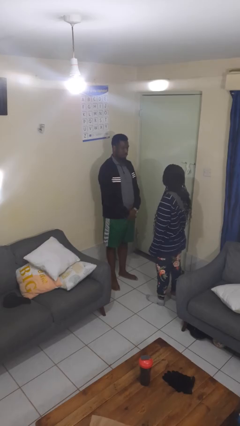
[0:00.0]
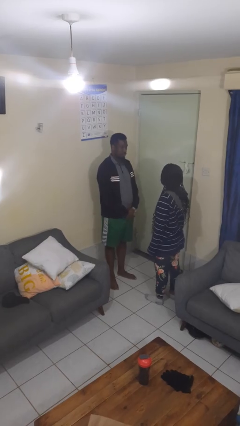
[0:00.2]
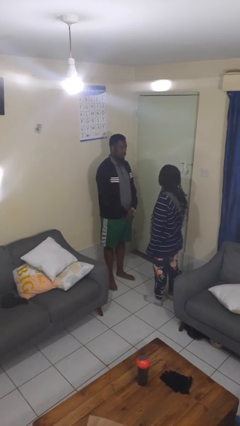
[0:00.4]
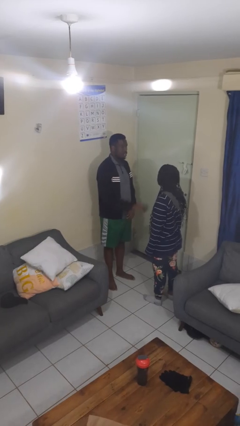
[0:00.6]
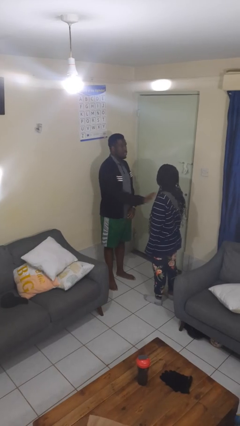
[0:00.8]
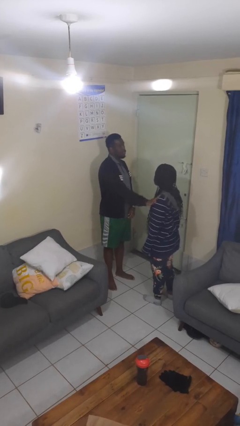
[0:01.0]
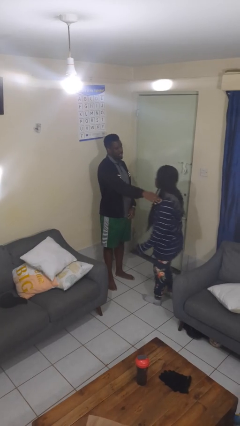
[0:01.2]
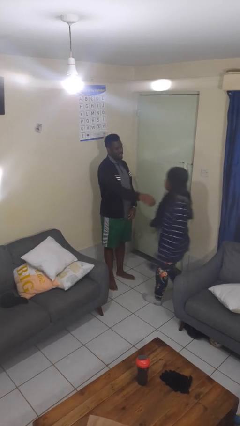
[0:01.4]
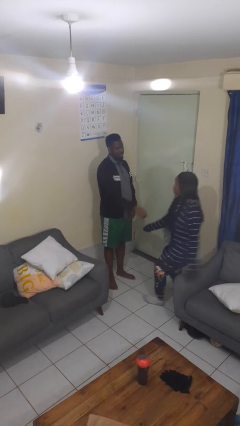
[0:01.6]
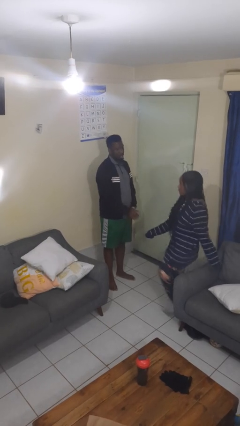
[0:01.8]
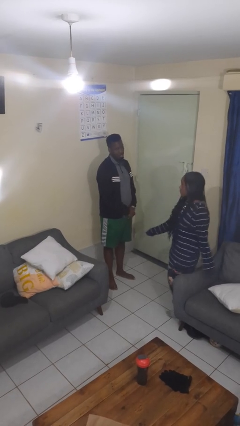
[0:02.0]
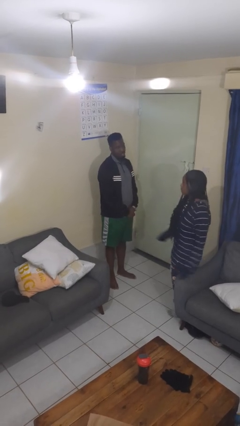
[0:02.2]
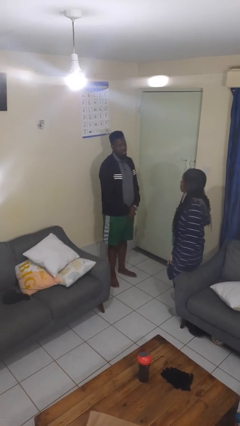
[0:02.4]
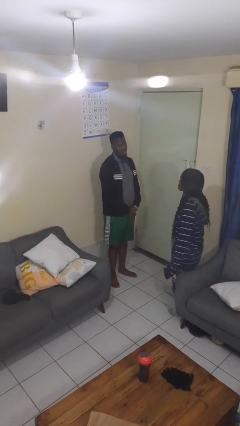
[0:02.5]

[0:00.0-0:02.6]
person shoves person

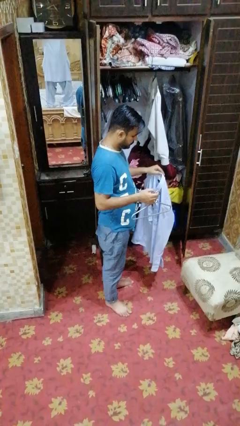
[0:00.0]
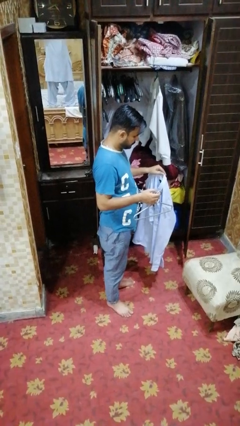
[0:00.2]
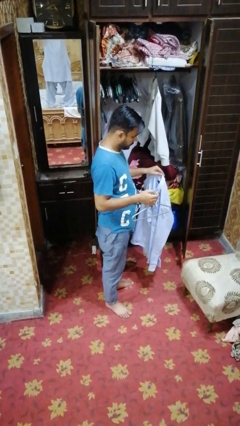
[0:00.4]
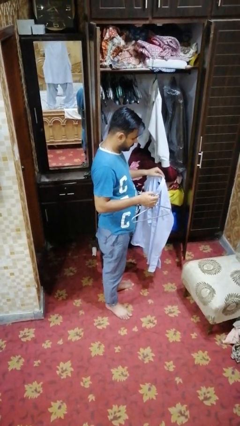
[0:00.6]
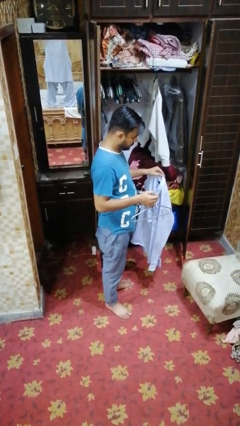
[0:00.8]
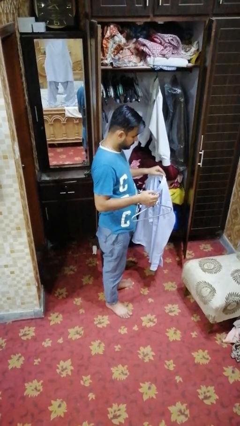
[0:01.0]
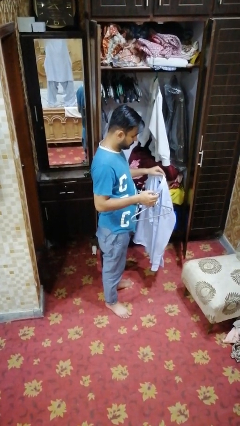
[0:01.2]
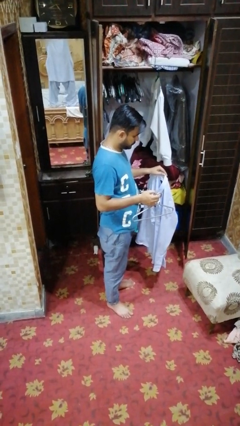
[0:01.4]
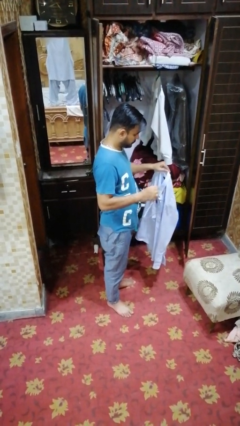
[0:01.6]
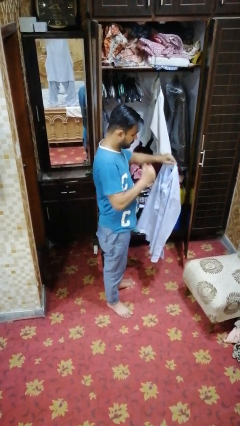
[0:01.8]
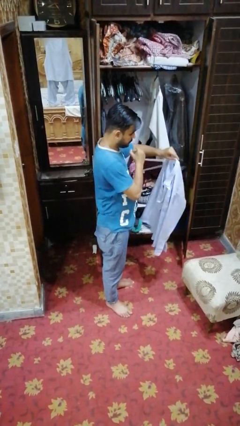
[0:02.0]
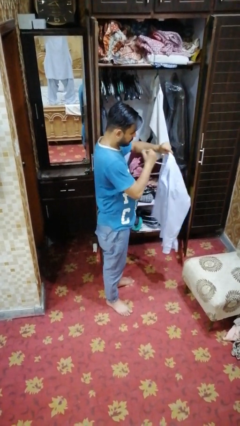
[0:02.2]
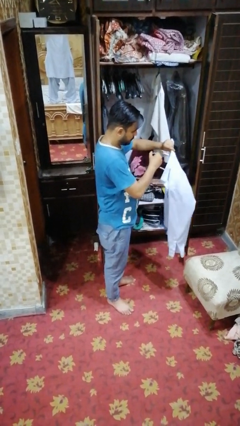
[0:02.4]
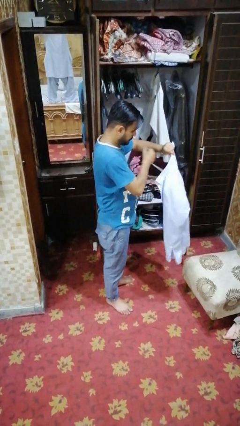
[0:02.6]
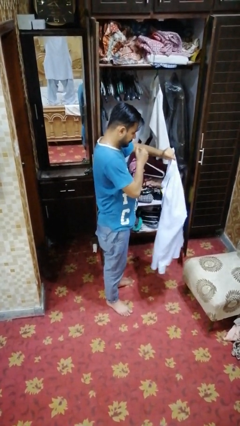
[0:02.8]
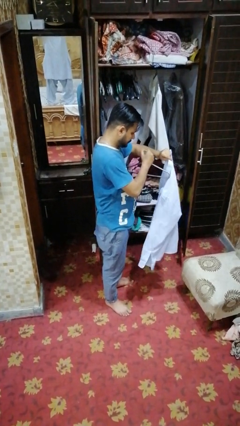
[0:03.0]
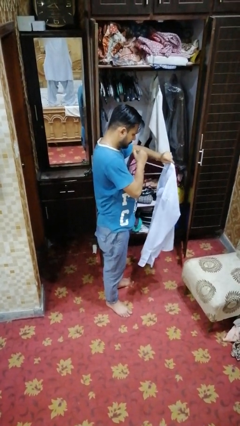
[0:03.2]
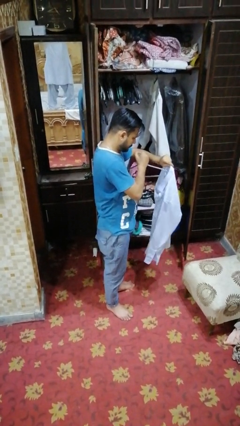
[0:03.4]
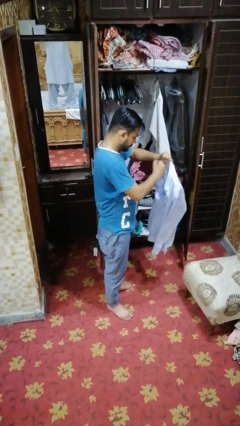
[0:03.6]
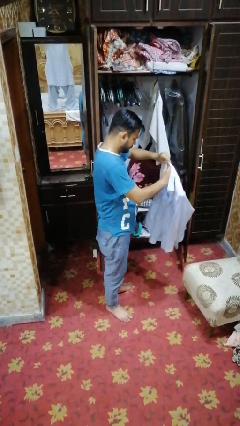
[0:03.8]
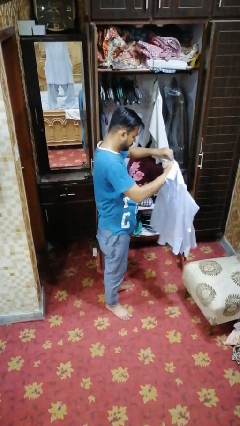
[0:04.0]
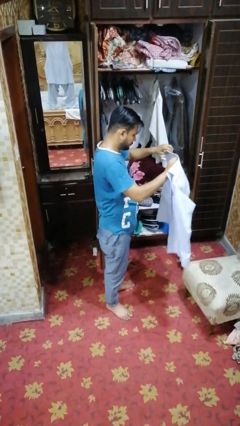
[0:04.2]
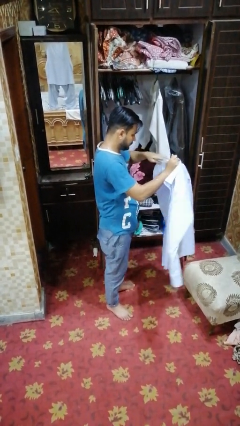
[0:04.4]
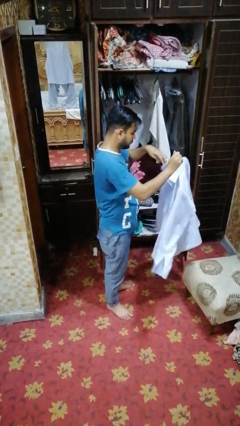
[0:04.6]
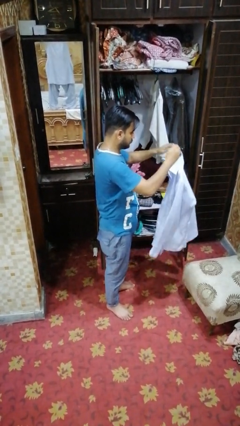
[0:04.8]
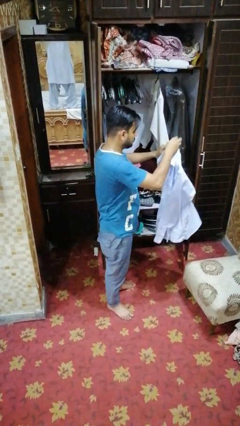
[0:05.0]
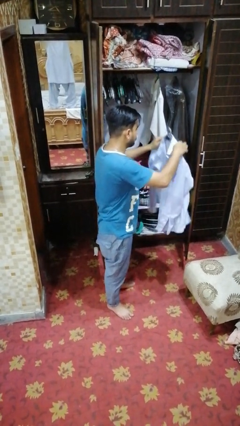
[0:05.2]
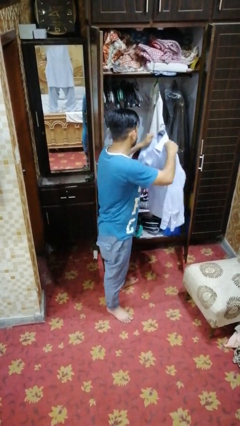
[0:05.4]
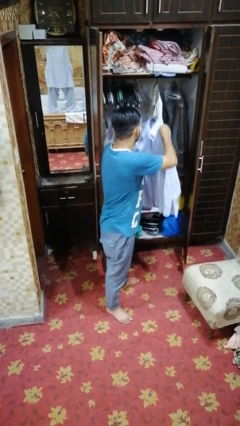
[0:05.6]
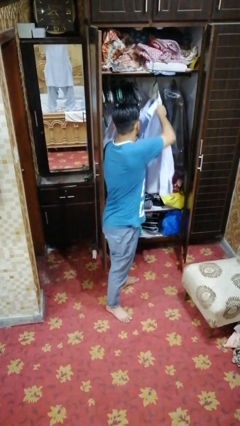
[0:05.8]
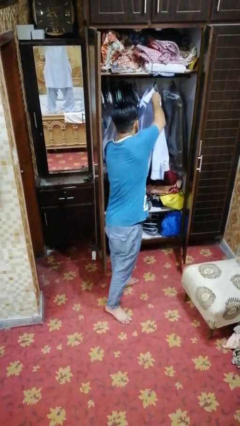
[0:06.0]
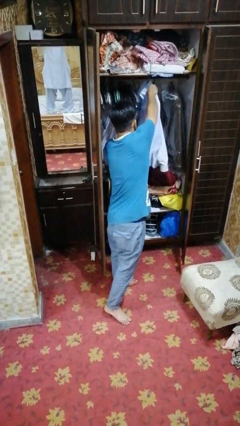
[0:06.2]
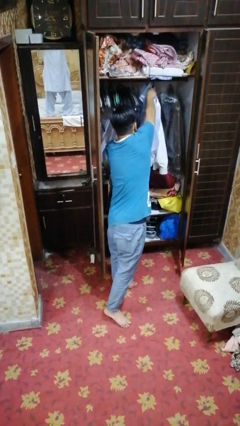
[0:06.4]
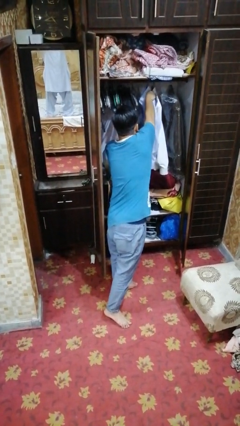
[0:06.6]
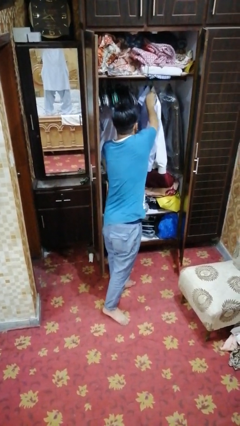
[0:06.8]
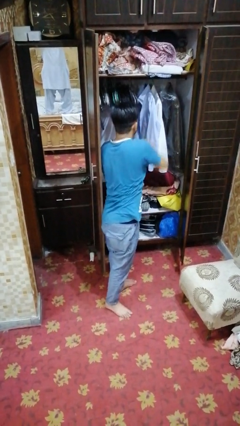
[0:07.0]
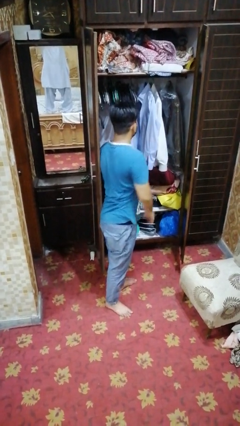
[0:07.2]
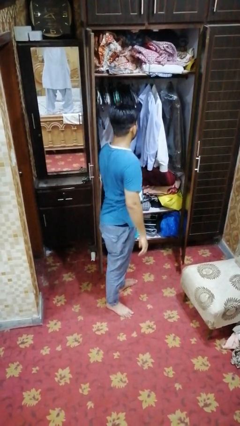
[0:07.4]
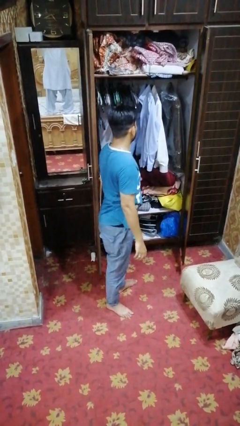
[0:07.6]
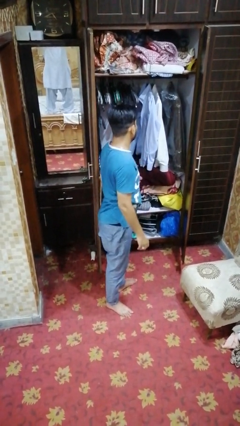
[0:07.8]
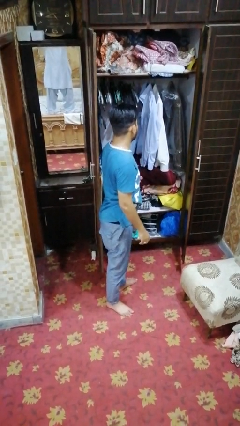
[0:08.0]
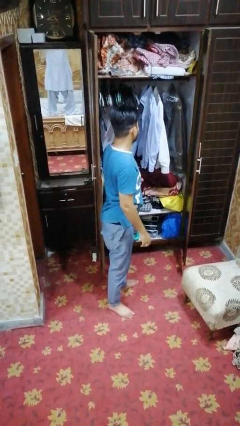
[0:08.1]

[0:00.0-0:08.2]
person puts clothes into closet

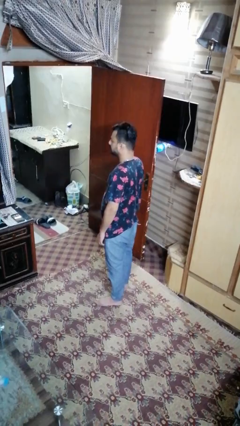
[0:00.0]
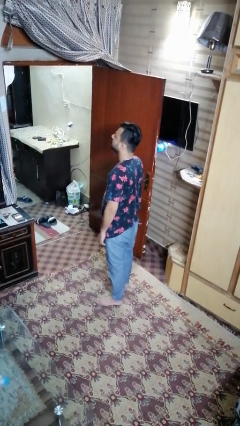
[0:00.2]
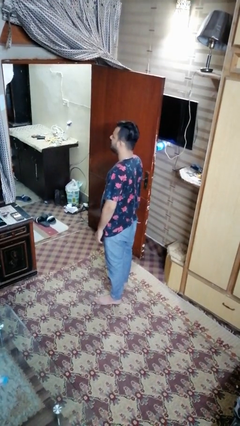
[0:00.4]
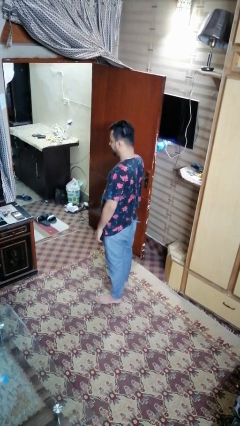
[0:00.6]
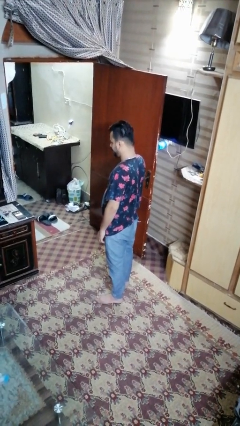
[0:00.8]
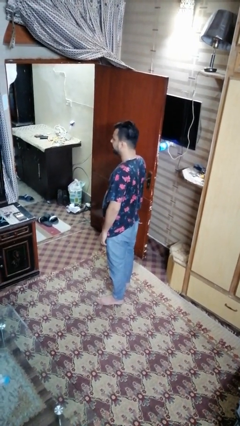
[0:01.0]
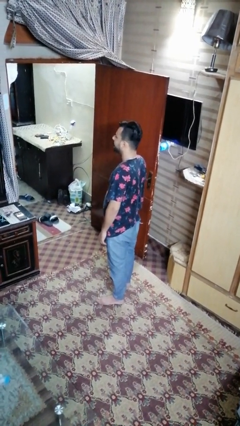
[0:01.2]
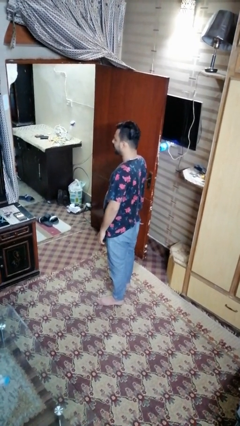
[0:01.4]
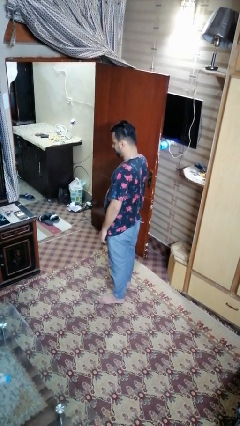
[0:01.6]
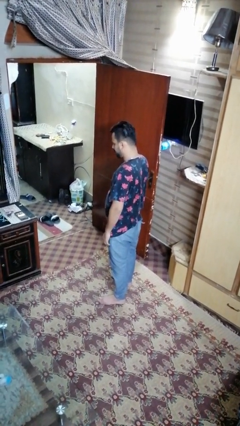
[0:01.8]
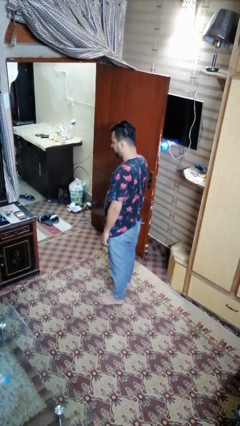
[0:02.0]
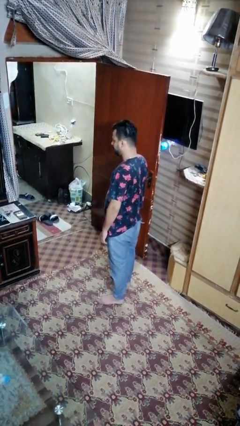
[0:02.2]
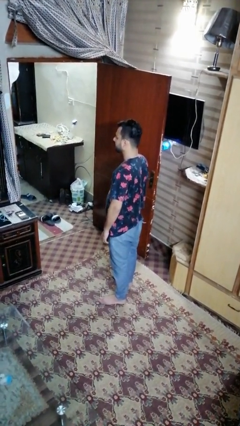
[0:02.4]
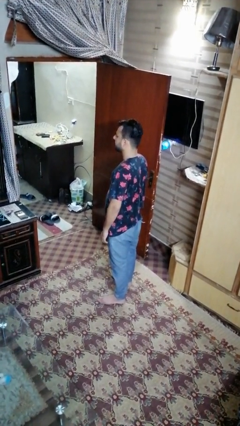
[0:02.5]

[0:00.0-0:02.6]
person nods head

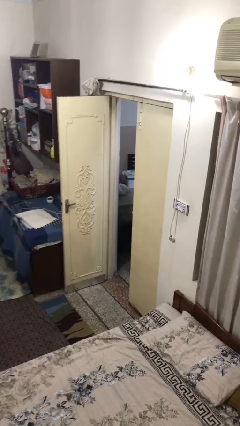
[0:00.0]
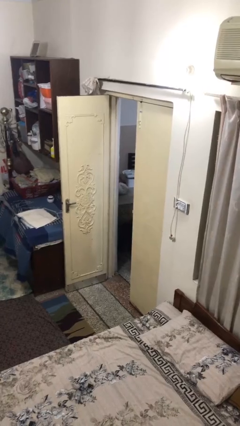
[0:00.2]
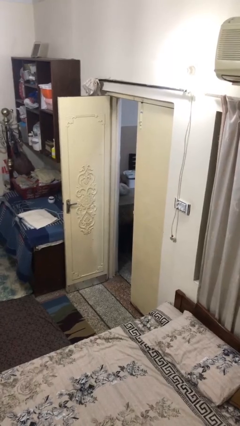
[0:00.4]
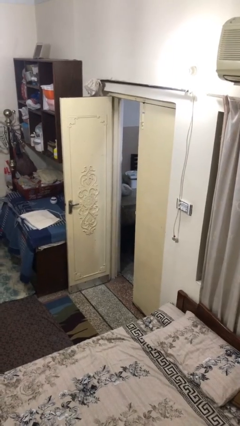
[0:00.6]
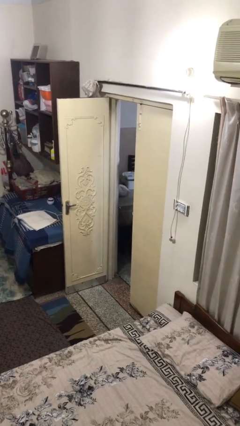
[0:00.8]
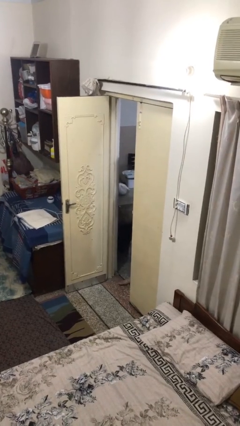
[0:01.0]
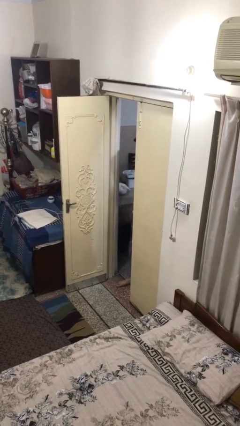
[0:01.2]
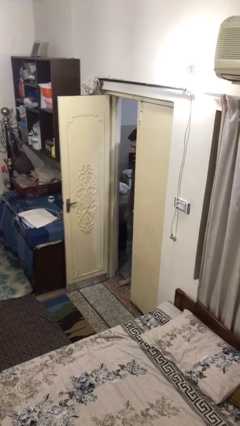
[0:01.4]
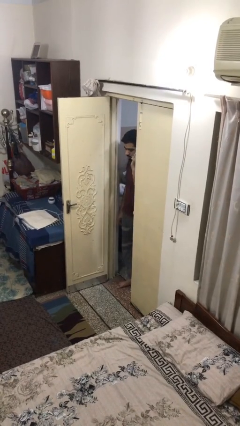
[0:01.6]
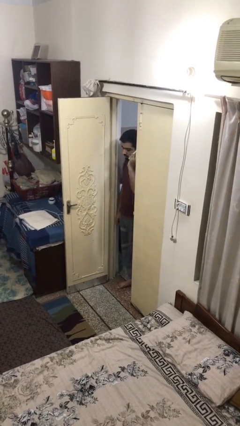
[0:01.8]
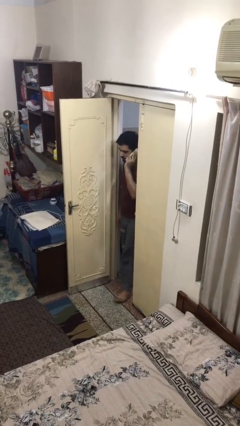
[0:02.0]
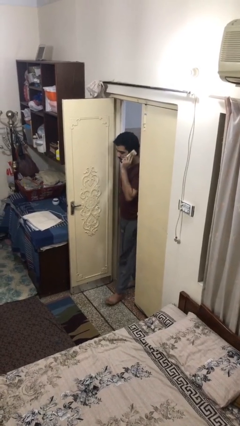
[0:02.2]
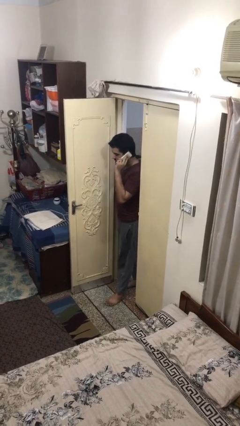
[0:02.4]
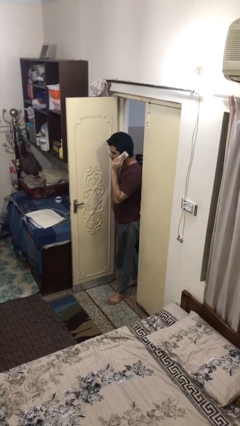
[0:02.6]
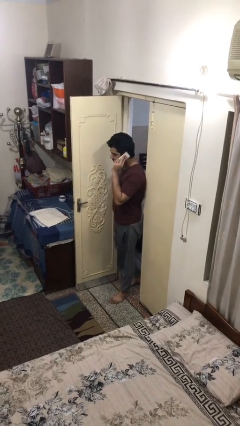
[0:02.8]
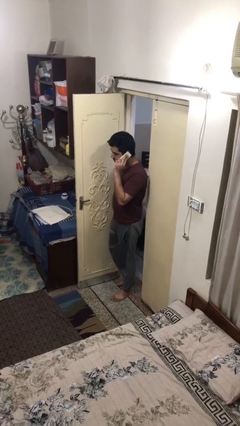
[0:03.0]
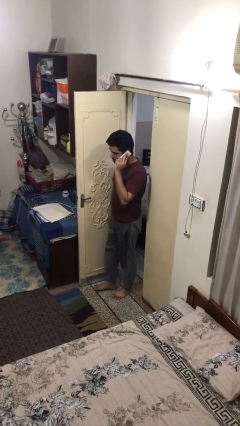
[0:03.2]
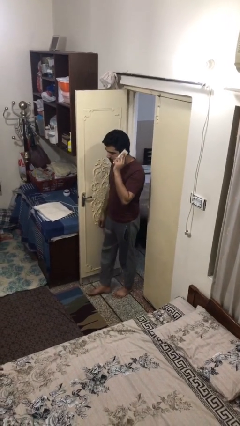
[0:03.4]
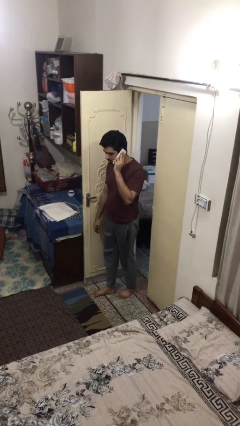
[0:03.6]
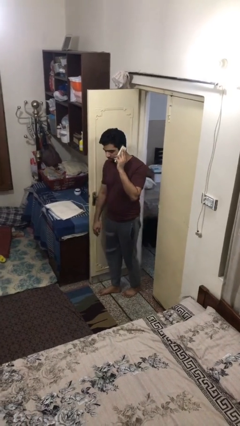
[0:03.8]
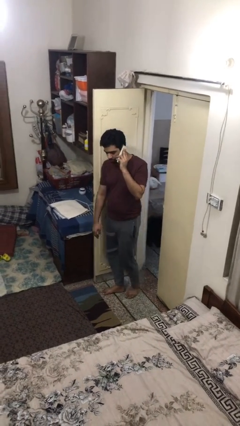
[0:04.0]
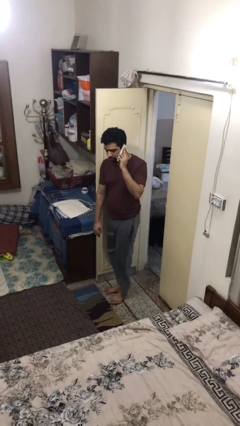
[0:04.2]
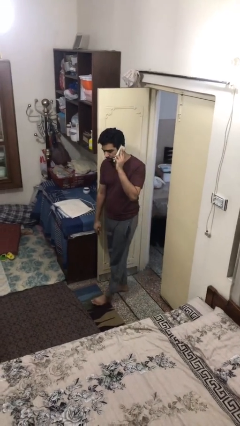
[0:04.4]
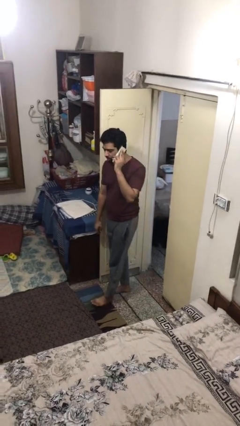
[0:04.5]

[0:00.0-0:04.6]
person enters scene through structure
